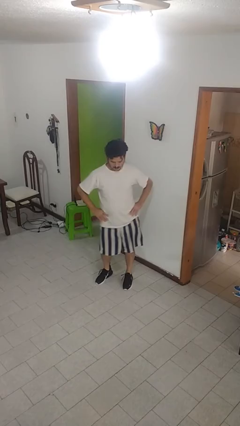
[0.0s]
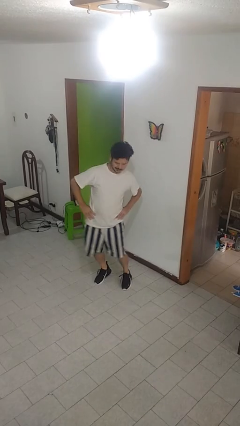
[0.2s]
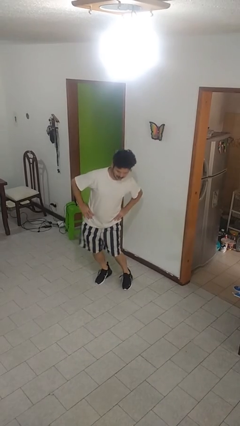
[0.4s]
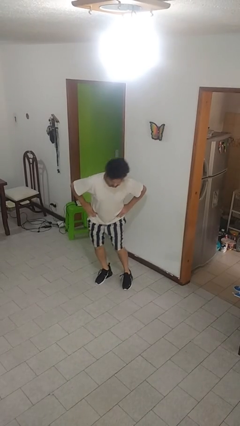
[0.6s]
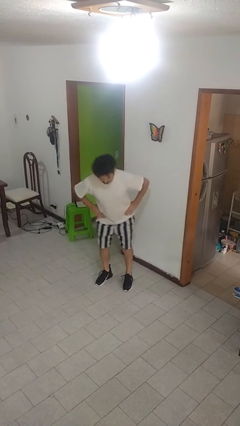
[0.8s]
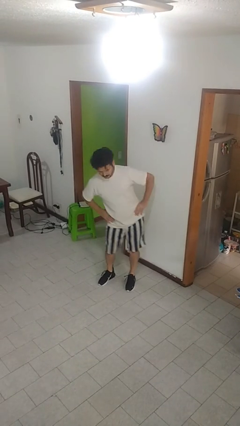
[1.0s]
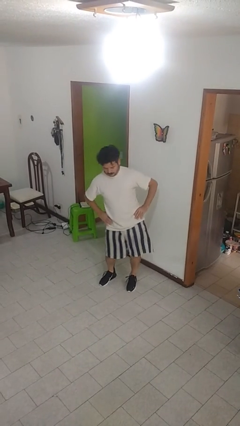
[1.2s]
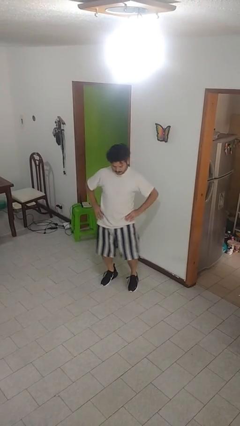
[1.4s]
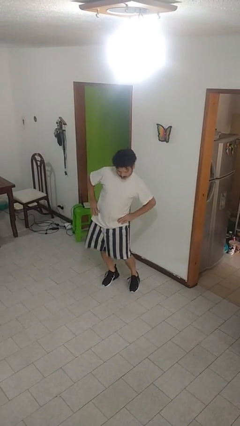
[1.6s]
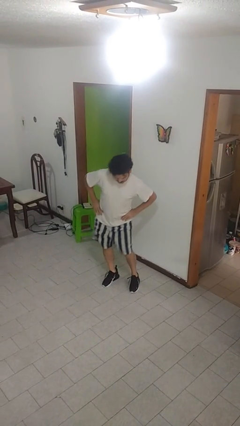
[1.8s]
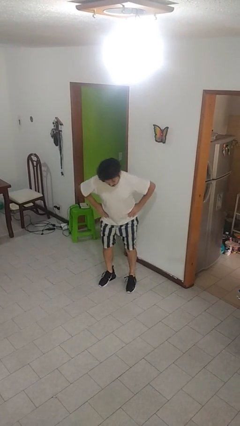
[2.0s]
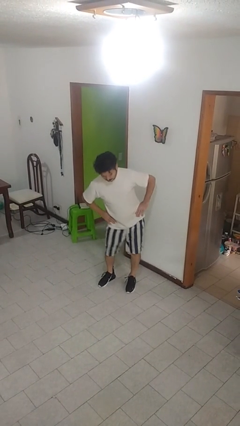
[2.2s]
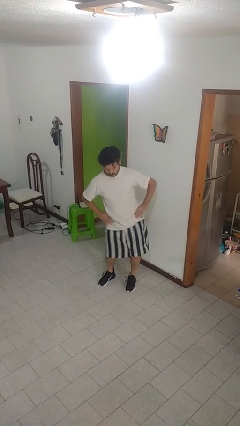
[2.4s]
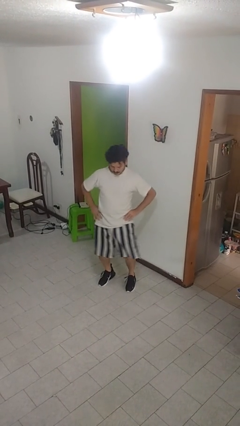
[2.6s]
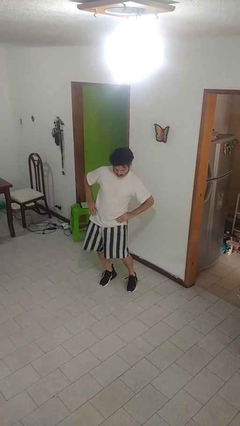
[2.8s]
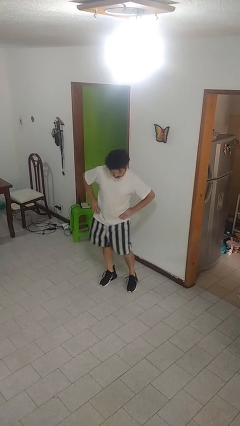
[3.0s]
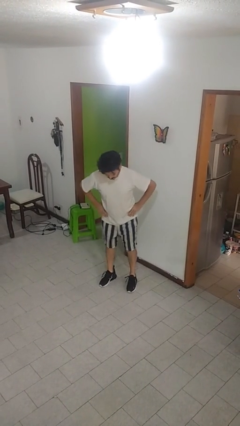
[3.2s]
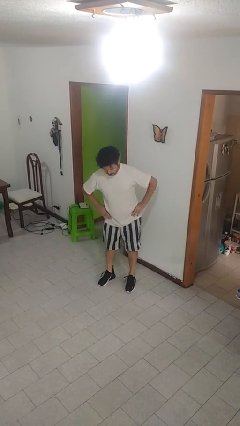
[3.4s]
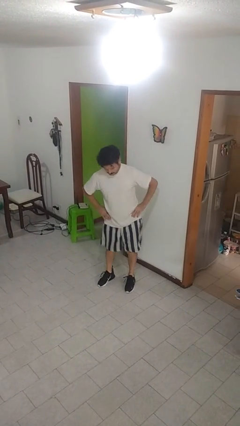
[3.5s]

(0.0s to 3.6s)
person wiggles hips

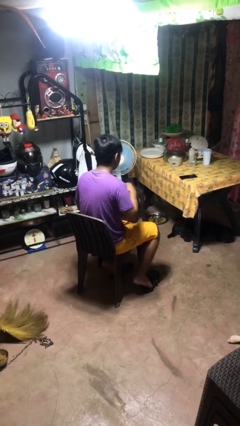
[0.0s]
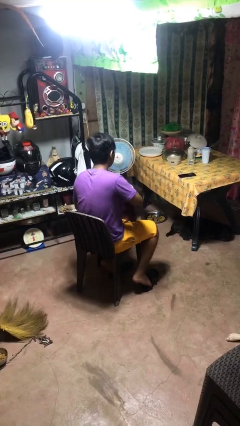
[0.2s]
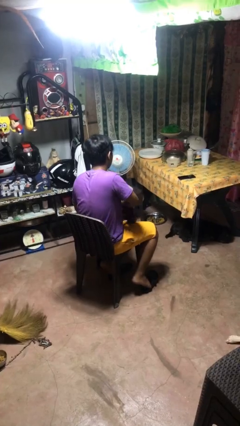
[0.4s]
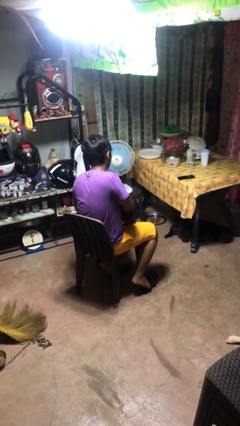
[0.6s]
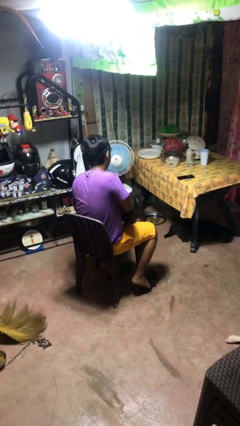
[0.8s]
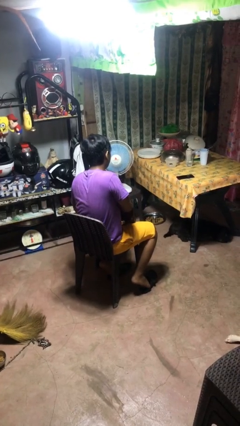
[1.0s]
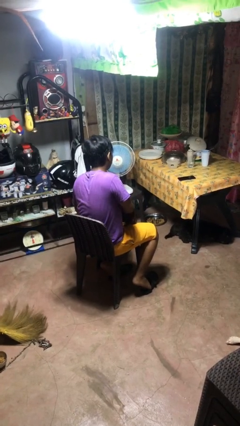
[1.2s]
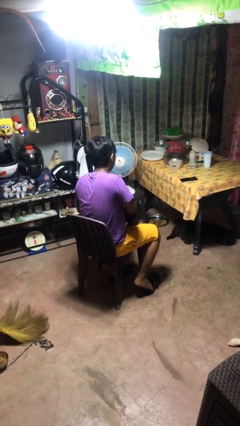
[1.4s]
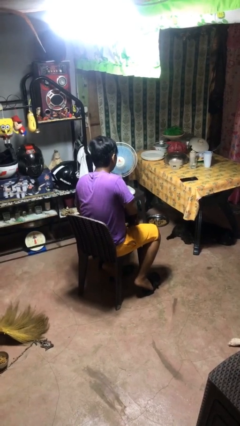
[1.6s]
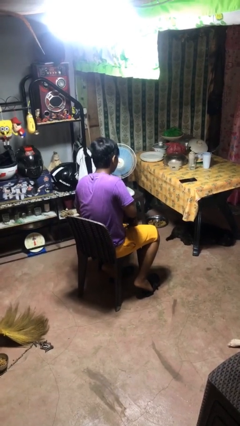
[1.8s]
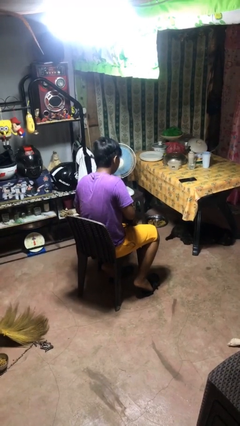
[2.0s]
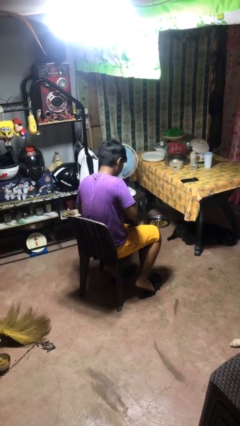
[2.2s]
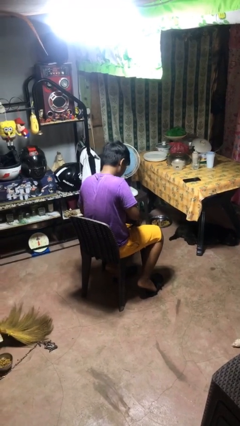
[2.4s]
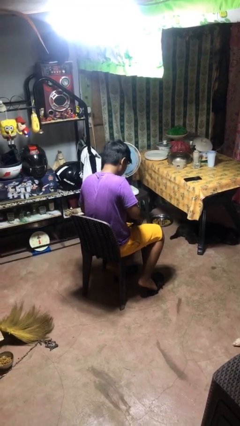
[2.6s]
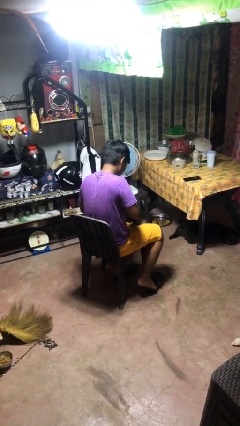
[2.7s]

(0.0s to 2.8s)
person searches in purse

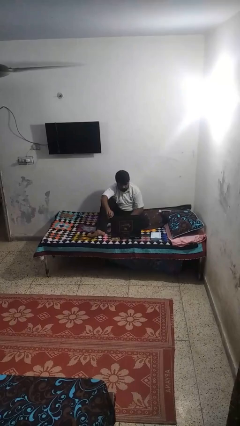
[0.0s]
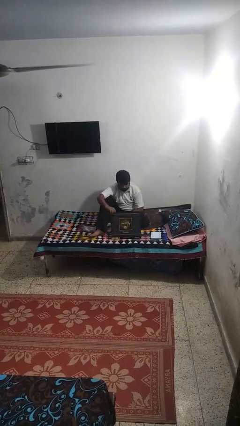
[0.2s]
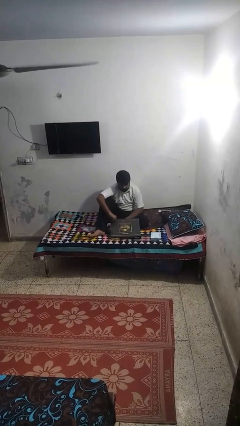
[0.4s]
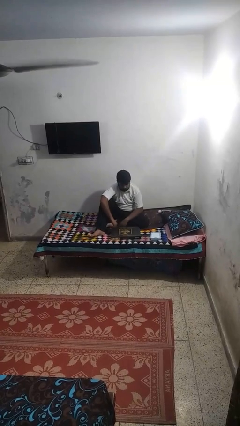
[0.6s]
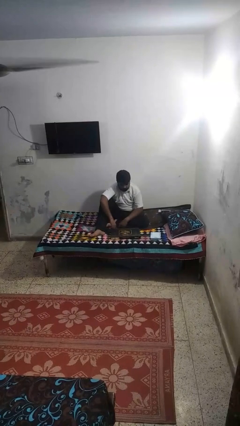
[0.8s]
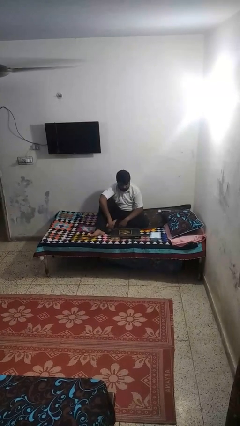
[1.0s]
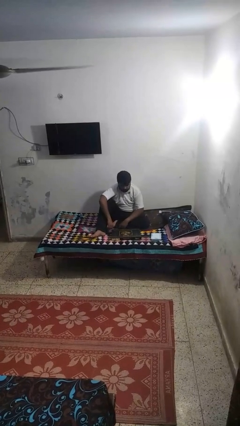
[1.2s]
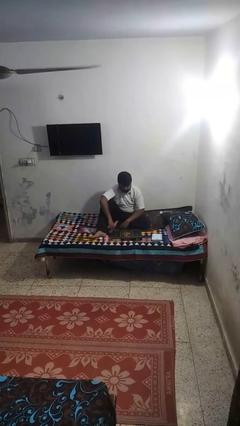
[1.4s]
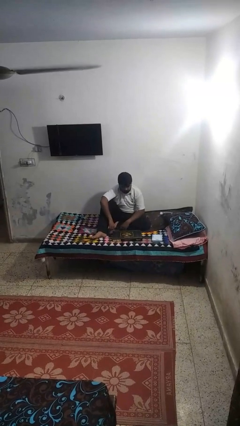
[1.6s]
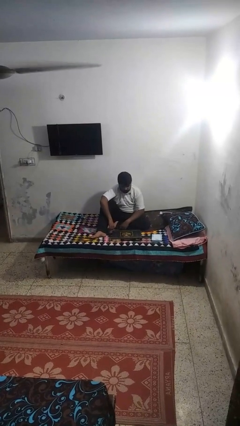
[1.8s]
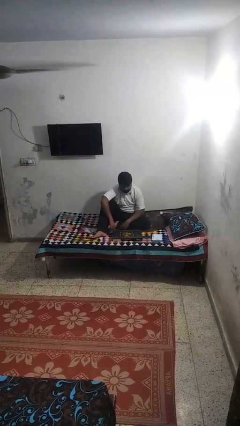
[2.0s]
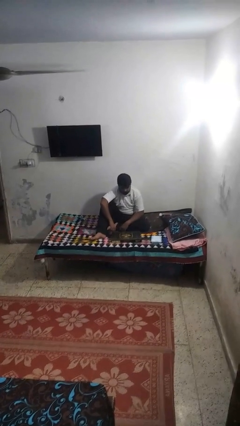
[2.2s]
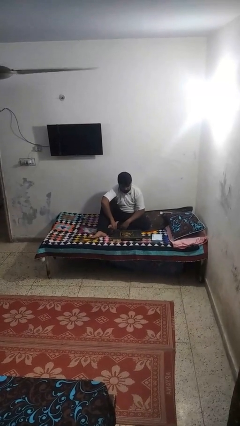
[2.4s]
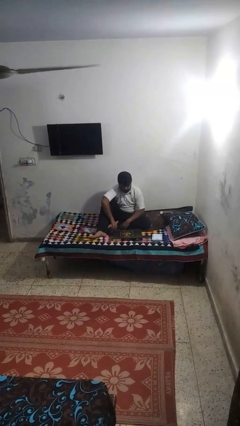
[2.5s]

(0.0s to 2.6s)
person closes laptop

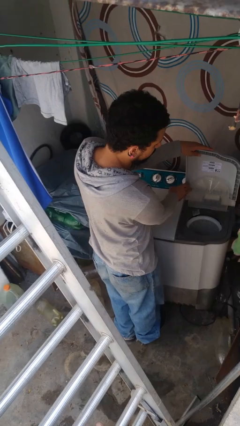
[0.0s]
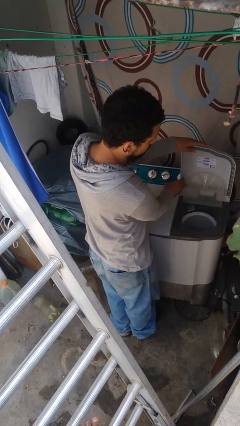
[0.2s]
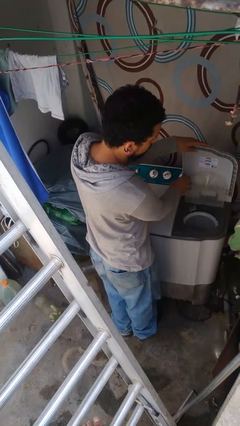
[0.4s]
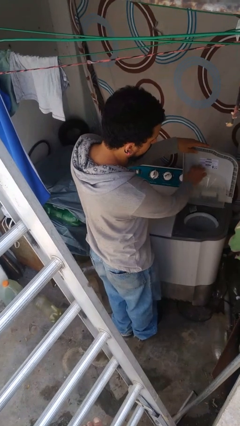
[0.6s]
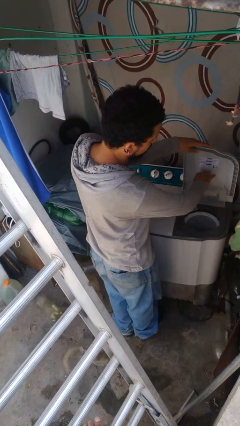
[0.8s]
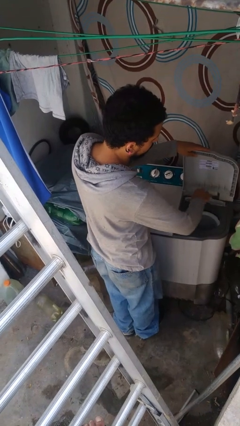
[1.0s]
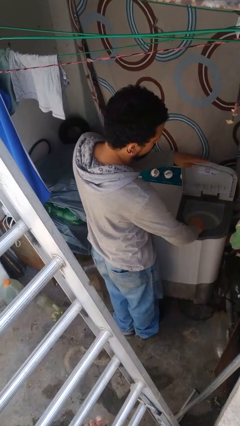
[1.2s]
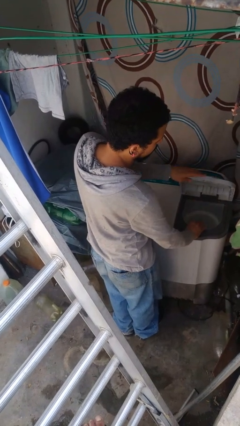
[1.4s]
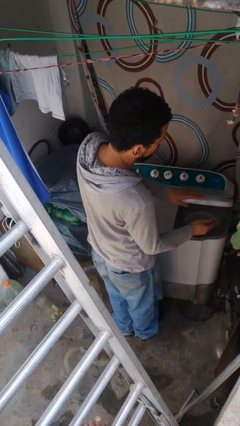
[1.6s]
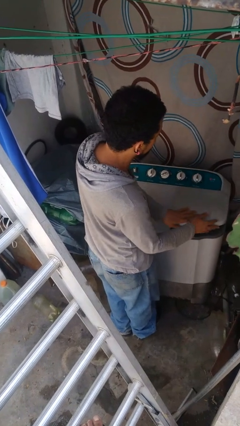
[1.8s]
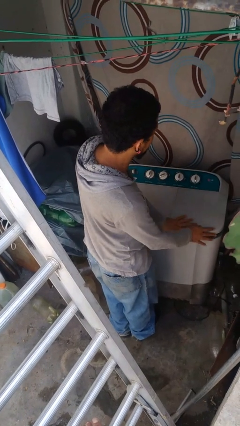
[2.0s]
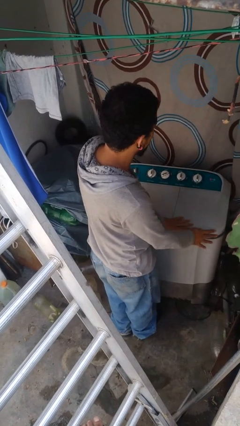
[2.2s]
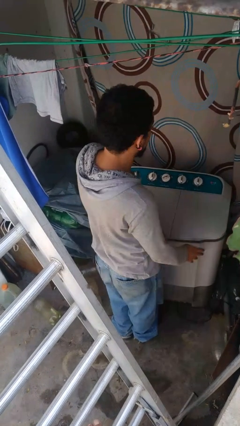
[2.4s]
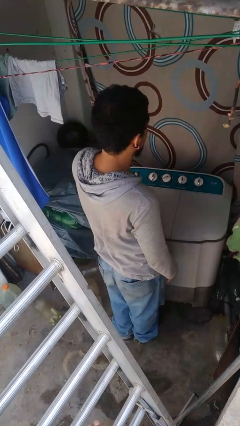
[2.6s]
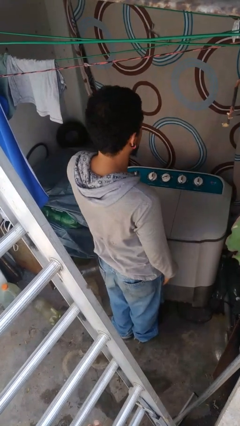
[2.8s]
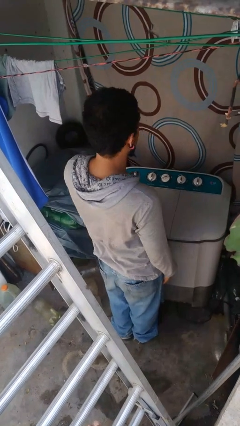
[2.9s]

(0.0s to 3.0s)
person closes clothes washer

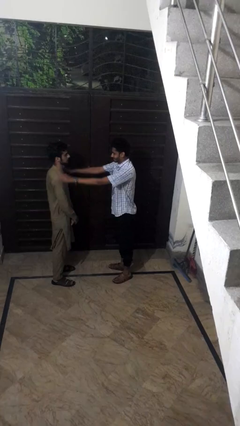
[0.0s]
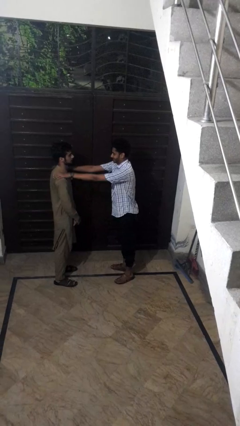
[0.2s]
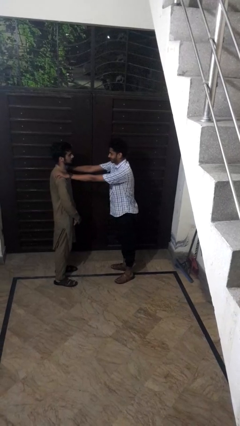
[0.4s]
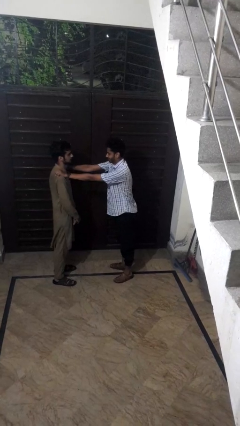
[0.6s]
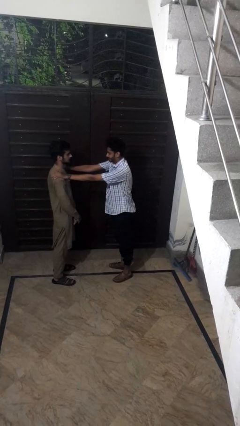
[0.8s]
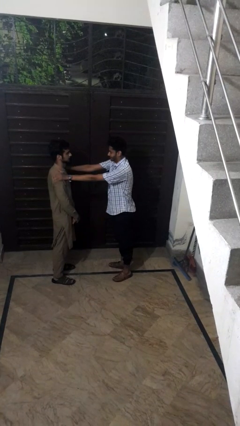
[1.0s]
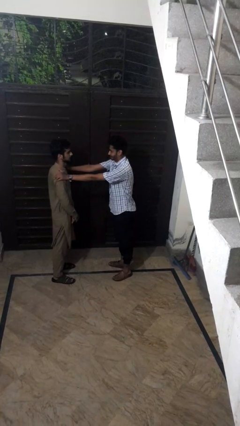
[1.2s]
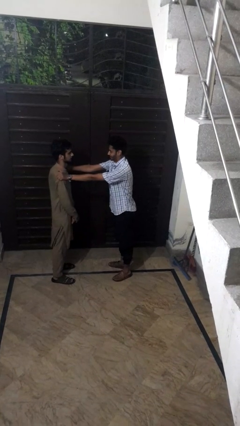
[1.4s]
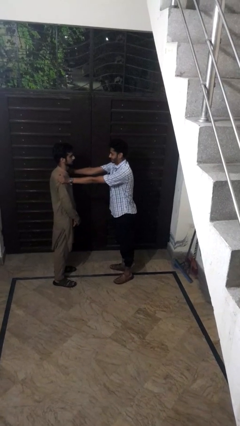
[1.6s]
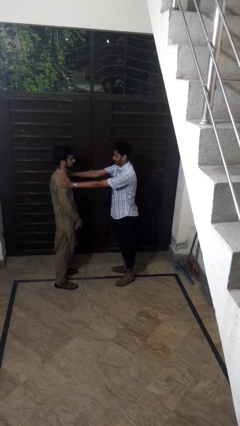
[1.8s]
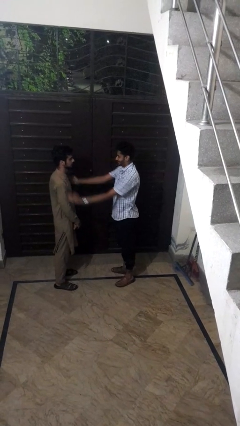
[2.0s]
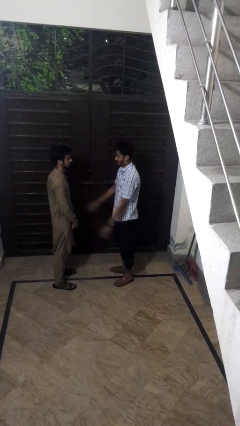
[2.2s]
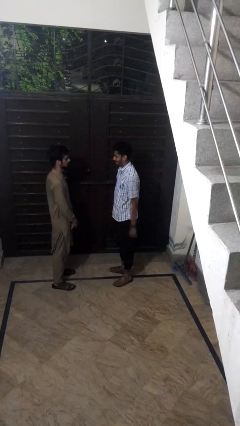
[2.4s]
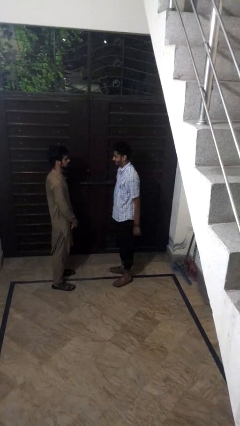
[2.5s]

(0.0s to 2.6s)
person pounds shoulders of person

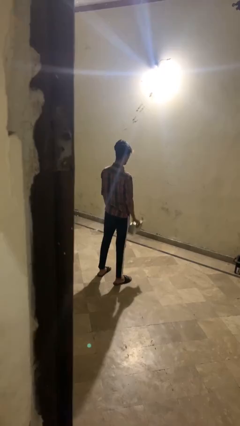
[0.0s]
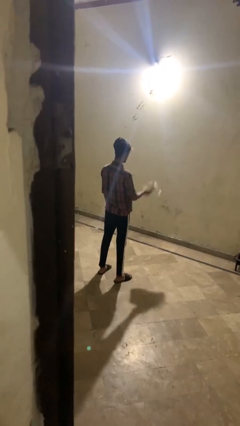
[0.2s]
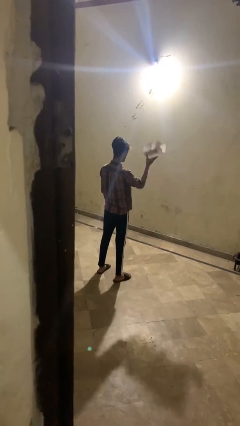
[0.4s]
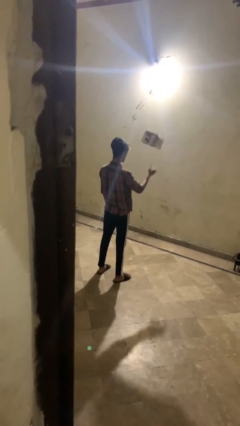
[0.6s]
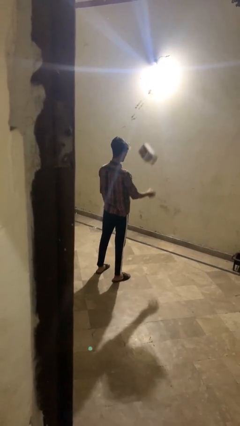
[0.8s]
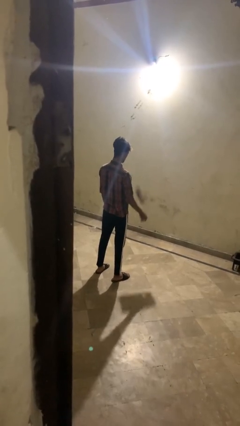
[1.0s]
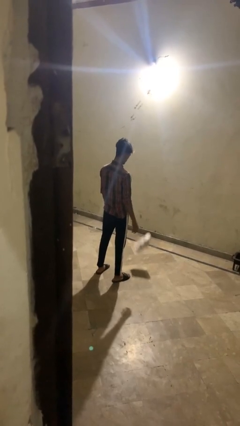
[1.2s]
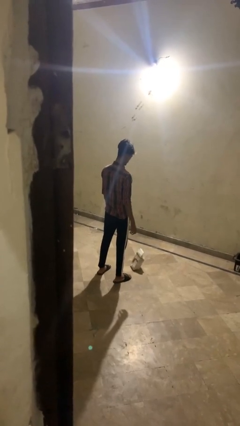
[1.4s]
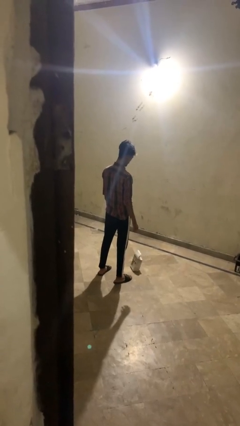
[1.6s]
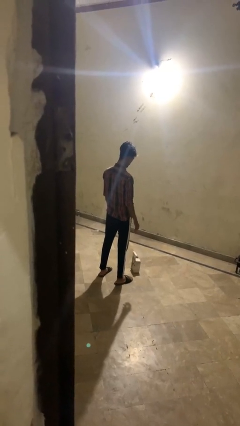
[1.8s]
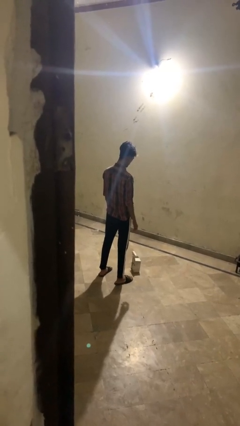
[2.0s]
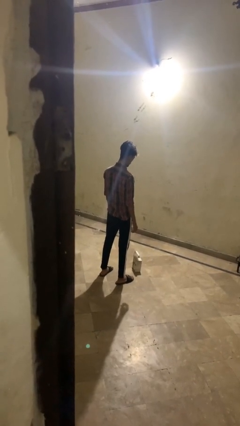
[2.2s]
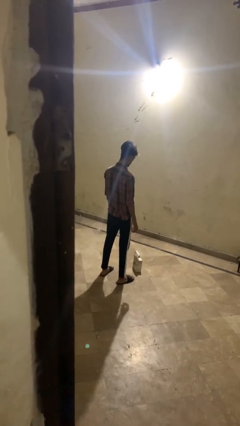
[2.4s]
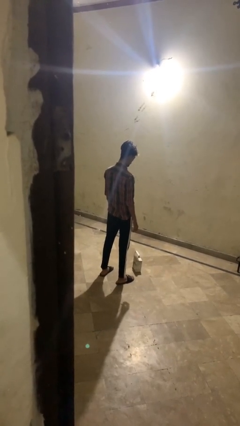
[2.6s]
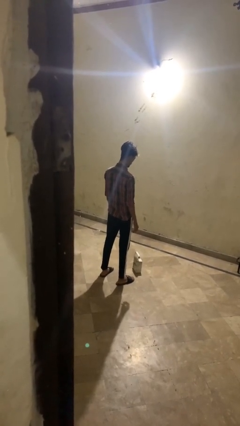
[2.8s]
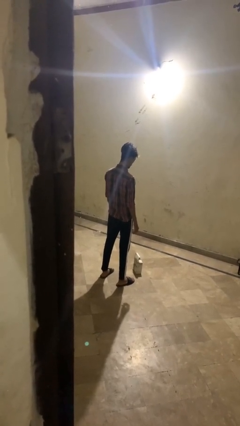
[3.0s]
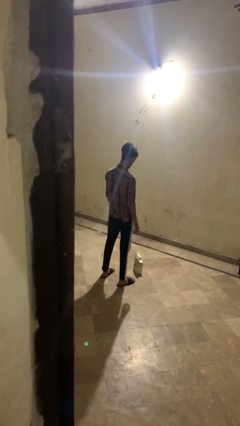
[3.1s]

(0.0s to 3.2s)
person throws object into air
